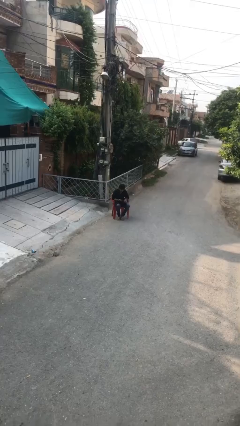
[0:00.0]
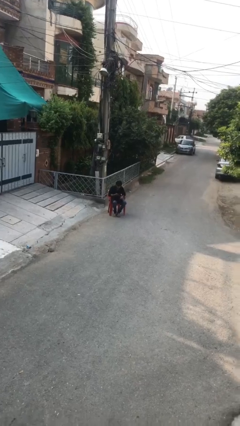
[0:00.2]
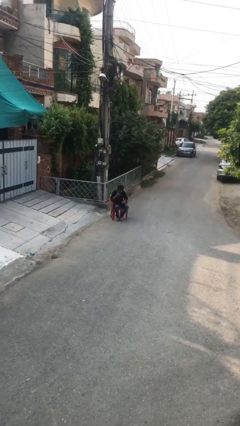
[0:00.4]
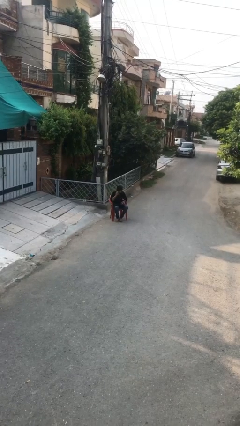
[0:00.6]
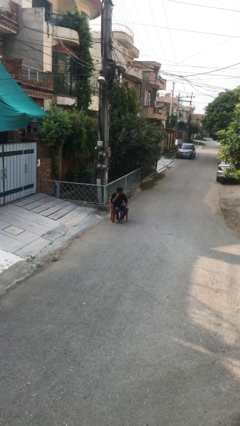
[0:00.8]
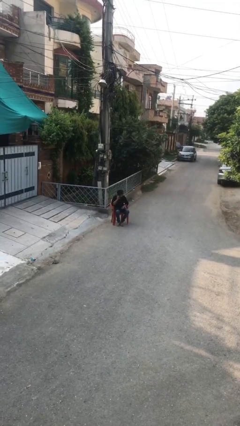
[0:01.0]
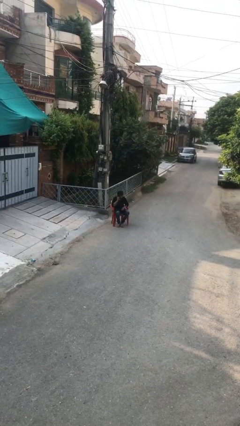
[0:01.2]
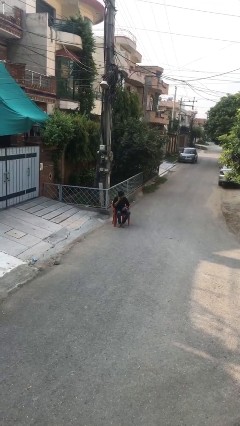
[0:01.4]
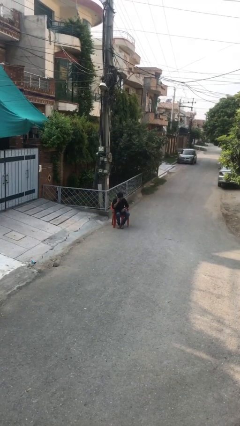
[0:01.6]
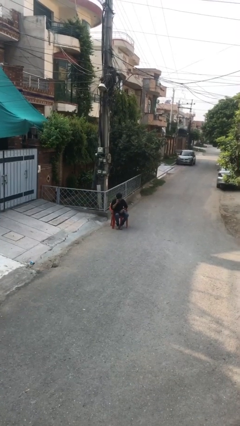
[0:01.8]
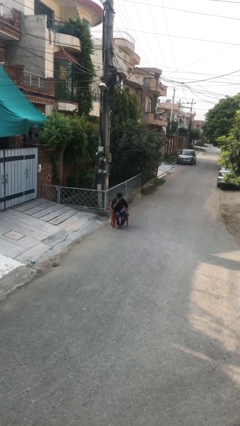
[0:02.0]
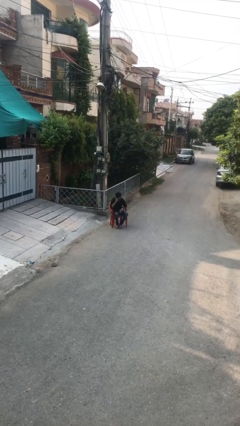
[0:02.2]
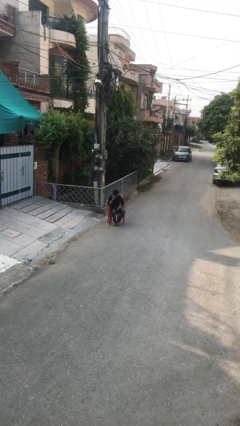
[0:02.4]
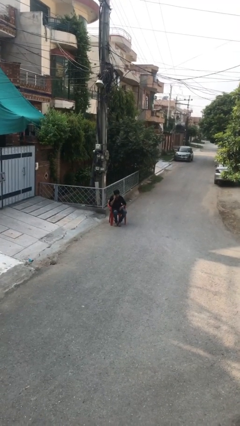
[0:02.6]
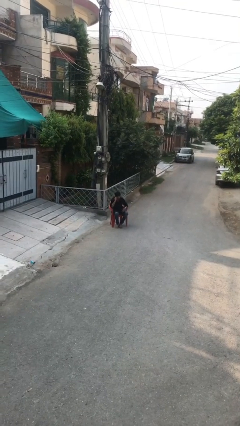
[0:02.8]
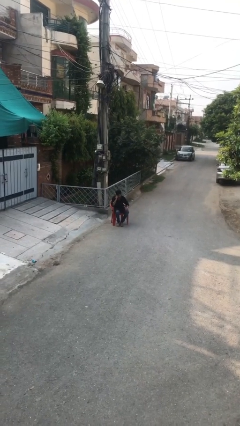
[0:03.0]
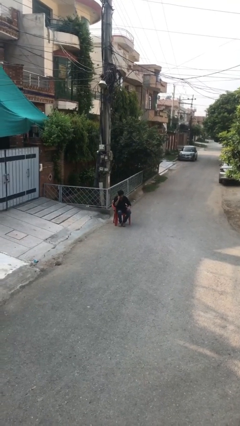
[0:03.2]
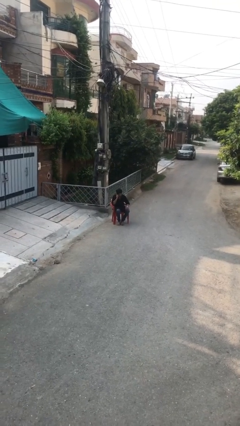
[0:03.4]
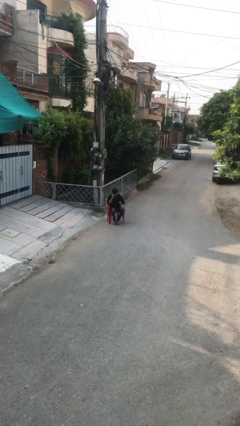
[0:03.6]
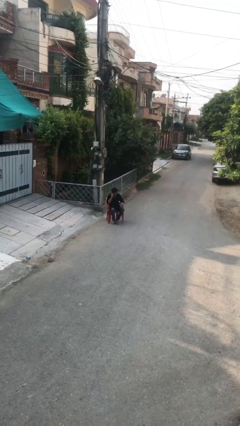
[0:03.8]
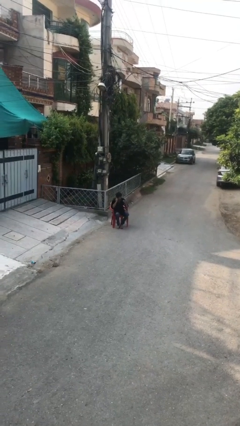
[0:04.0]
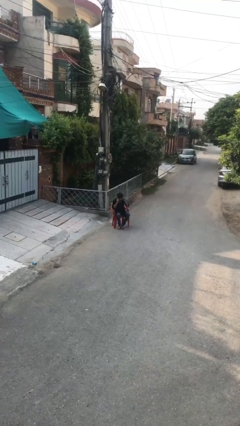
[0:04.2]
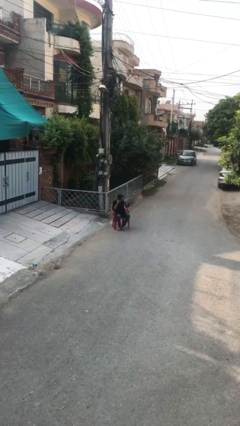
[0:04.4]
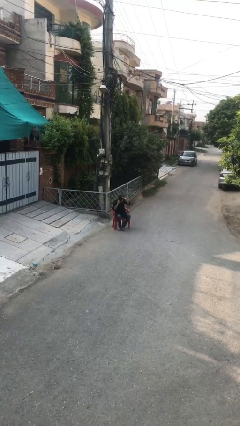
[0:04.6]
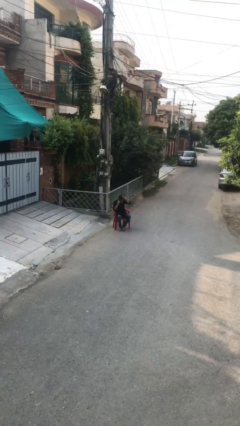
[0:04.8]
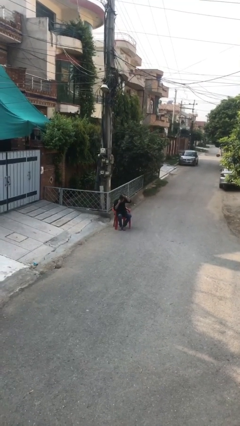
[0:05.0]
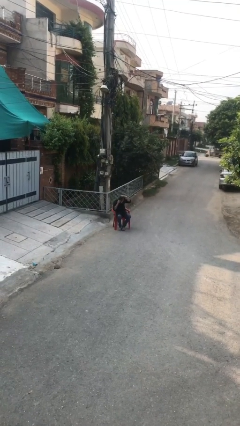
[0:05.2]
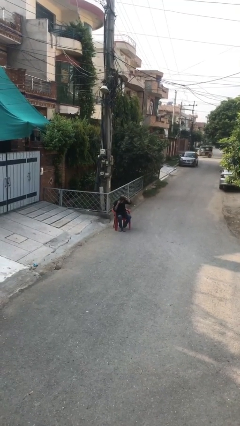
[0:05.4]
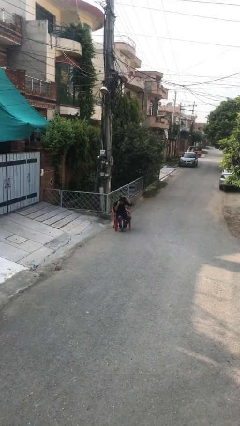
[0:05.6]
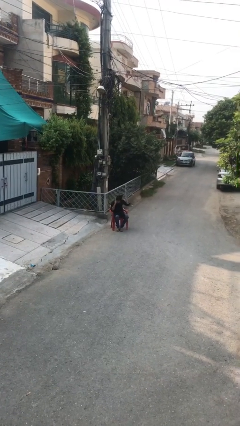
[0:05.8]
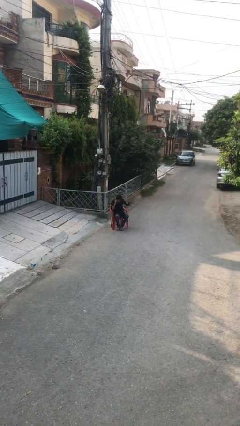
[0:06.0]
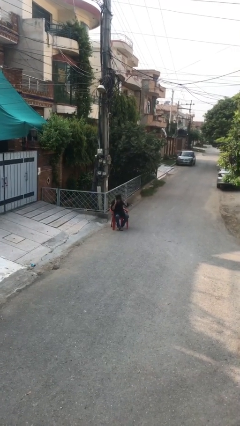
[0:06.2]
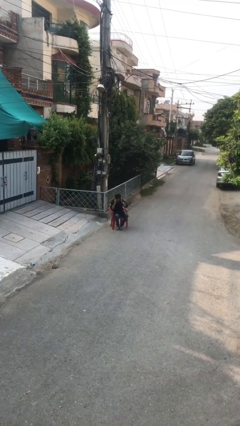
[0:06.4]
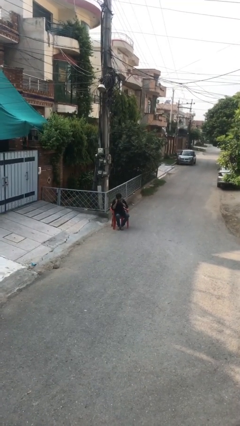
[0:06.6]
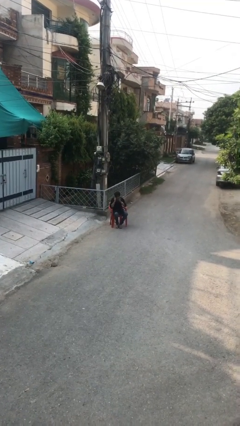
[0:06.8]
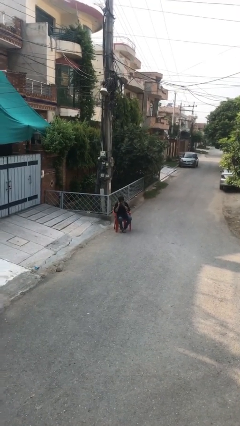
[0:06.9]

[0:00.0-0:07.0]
person talks on phone

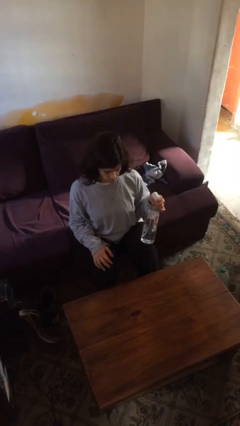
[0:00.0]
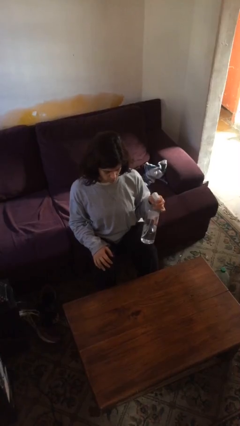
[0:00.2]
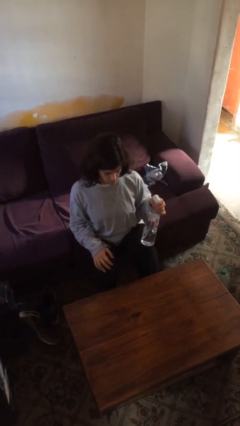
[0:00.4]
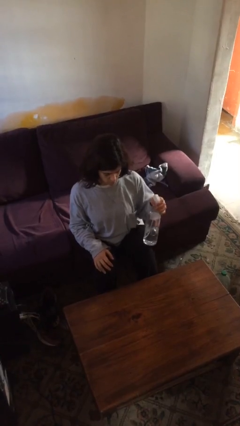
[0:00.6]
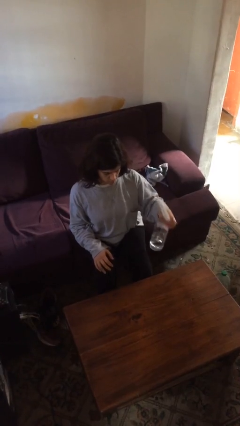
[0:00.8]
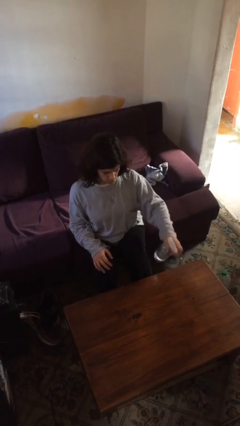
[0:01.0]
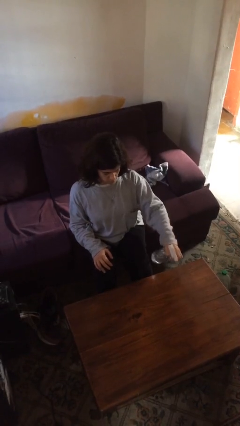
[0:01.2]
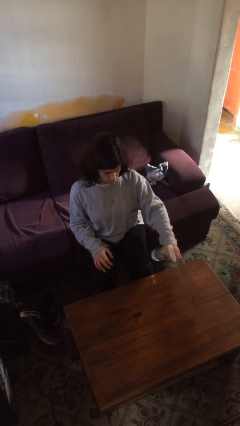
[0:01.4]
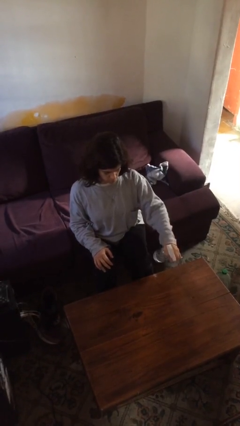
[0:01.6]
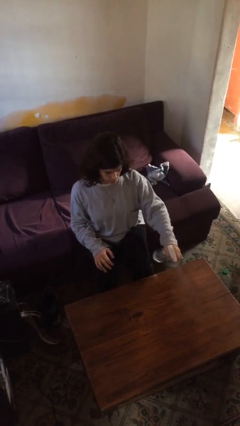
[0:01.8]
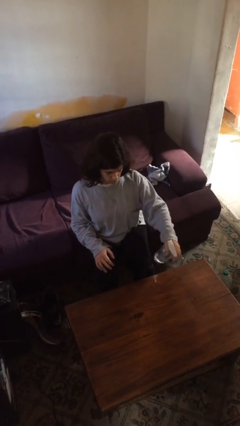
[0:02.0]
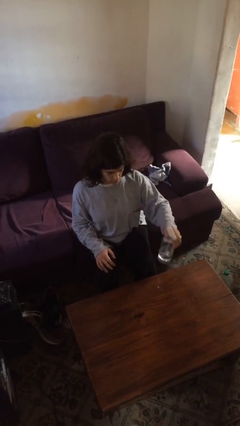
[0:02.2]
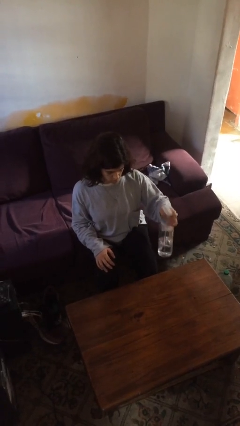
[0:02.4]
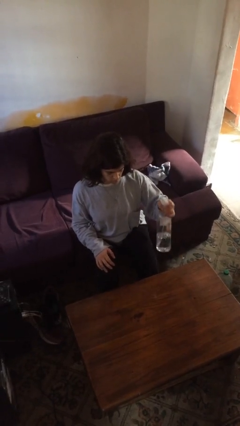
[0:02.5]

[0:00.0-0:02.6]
person sprays from bottle

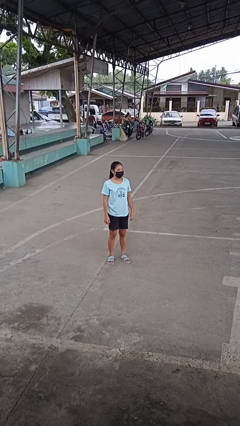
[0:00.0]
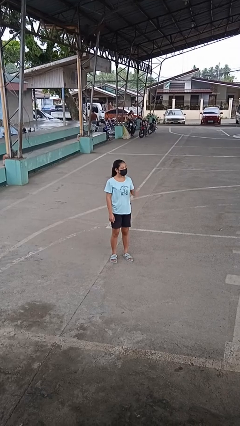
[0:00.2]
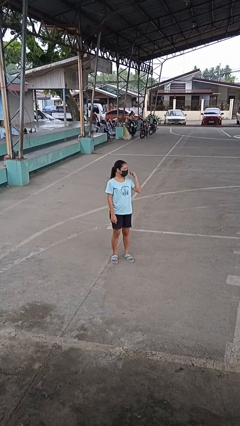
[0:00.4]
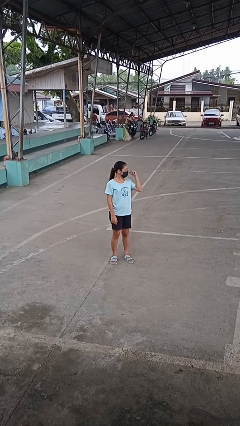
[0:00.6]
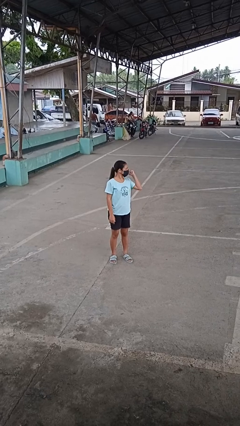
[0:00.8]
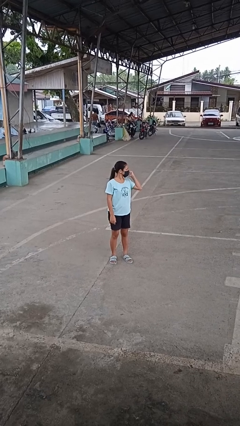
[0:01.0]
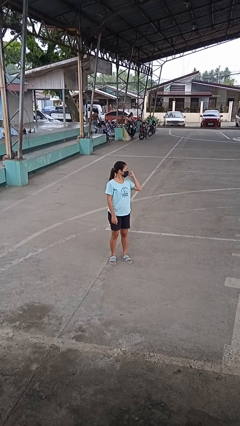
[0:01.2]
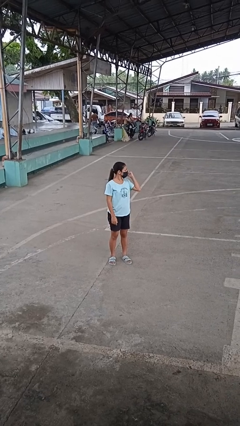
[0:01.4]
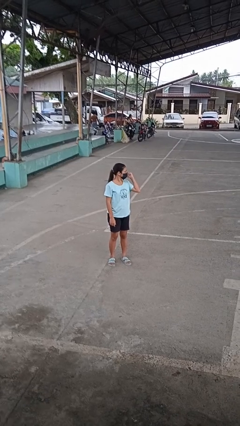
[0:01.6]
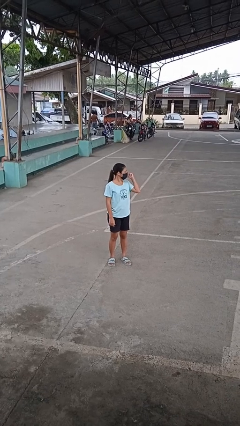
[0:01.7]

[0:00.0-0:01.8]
person gestures behind me

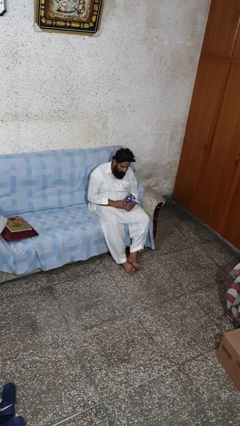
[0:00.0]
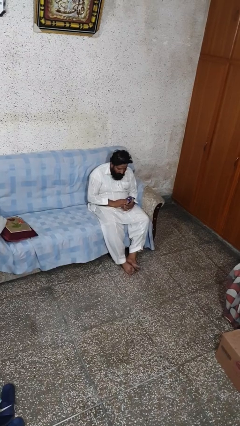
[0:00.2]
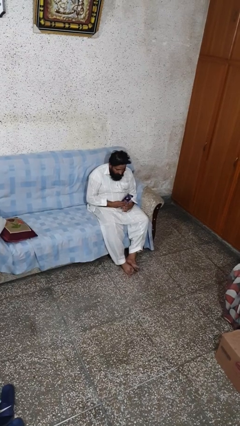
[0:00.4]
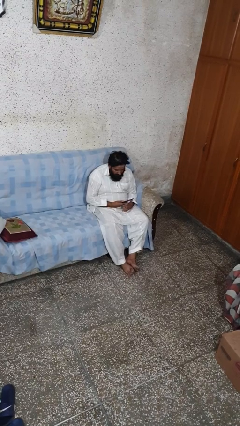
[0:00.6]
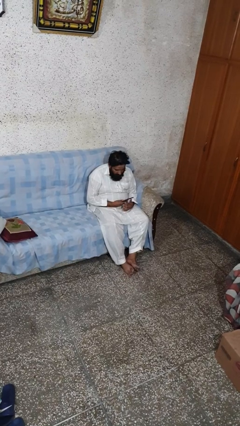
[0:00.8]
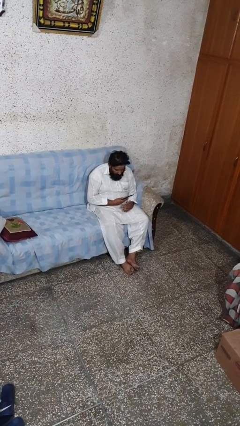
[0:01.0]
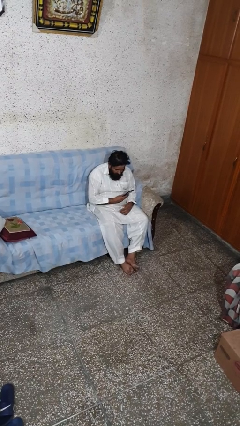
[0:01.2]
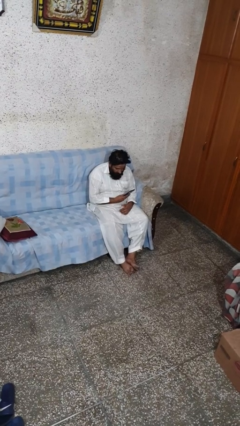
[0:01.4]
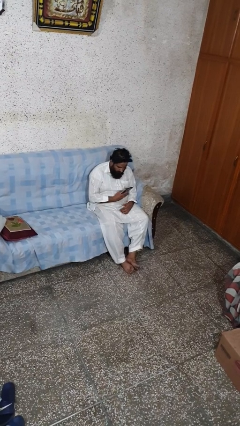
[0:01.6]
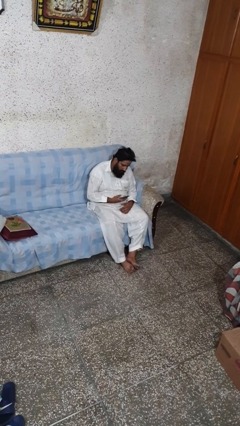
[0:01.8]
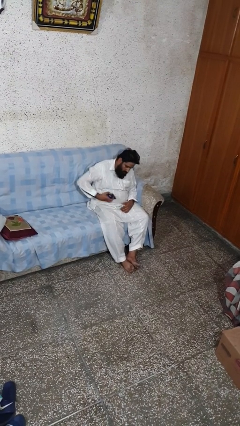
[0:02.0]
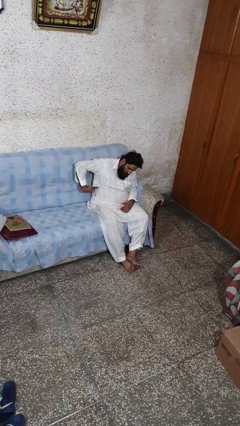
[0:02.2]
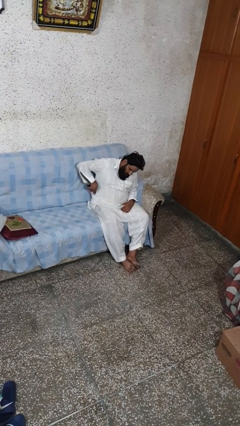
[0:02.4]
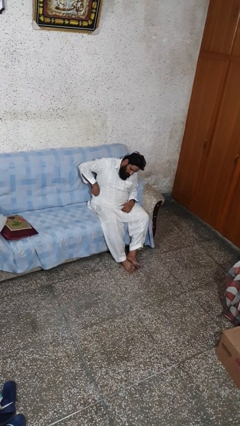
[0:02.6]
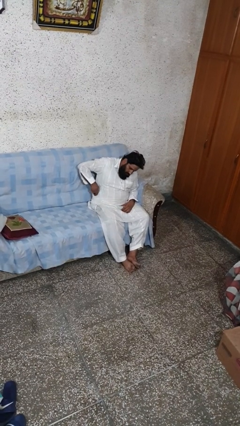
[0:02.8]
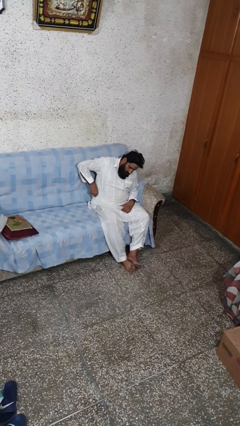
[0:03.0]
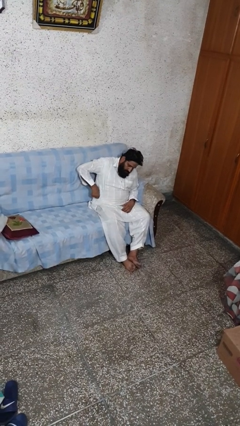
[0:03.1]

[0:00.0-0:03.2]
person puts phone into pocket

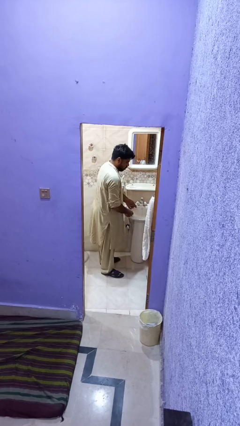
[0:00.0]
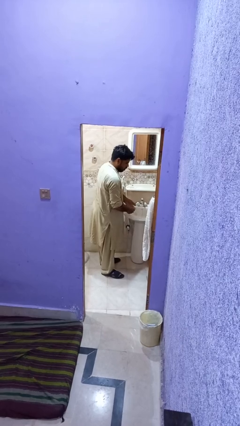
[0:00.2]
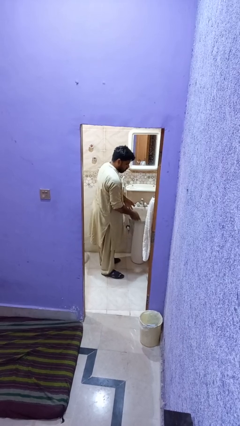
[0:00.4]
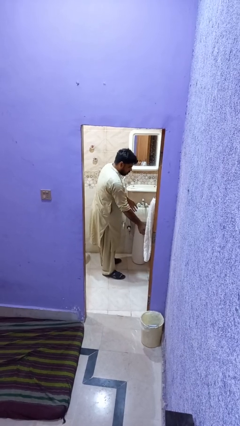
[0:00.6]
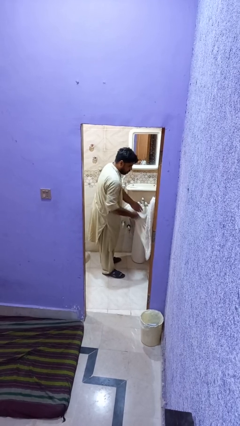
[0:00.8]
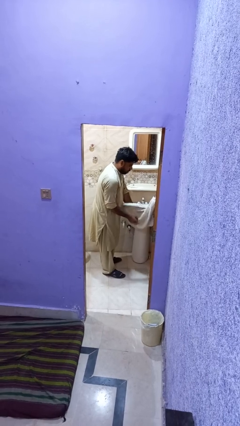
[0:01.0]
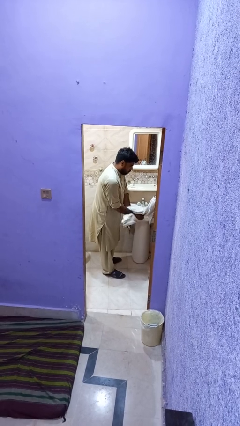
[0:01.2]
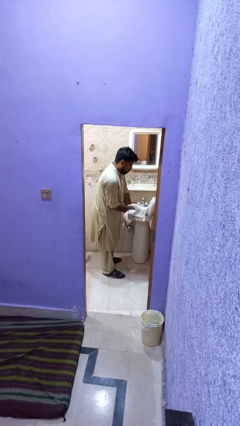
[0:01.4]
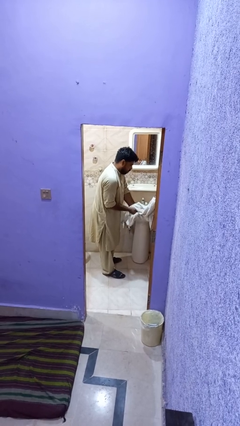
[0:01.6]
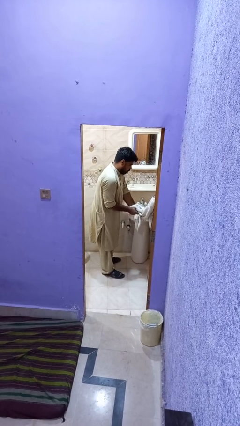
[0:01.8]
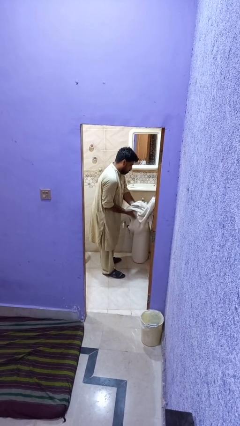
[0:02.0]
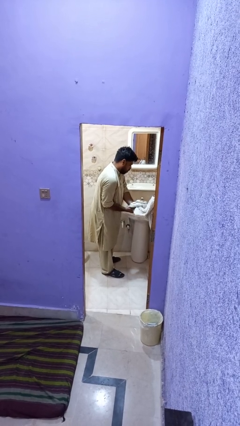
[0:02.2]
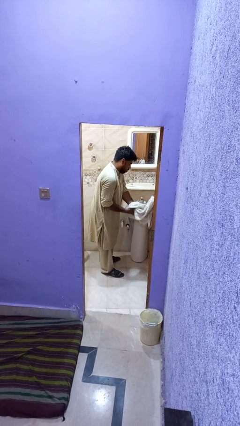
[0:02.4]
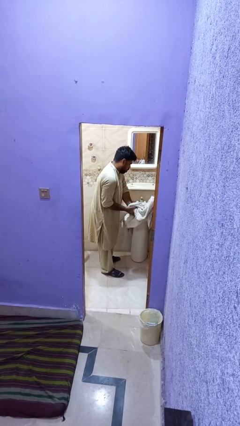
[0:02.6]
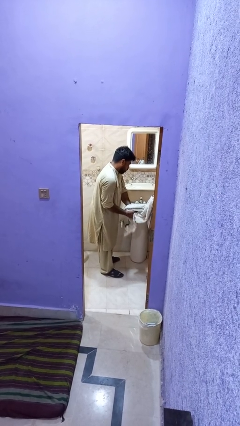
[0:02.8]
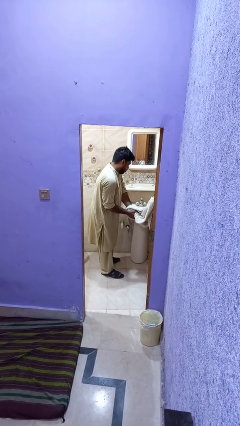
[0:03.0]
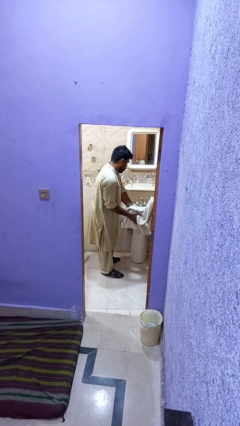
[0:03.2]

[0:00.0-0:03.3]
person dries hands with towel
